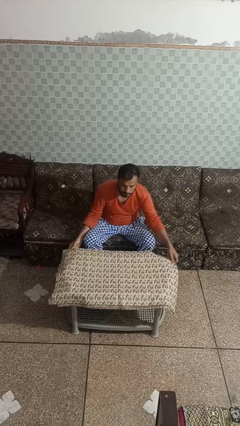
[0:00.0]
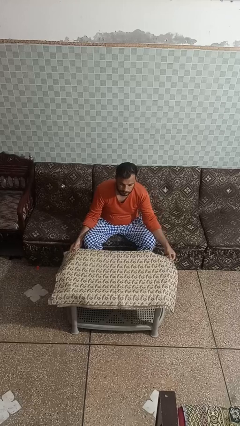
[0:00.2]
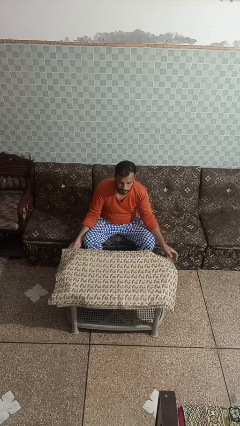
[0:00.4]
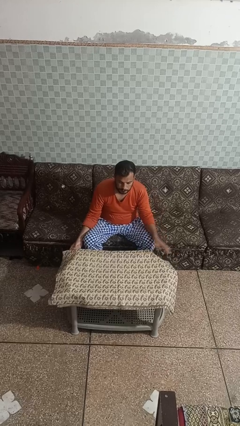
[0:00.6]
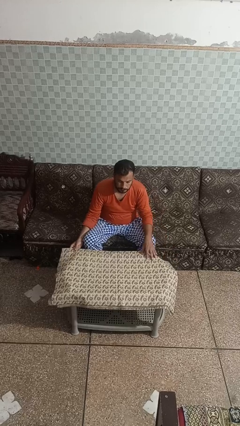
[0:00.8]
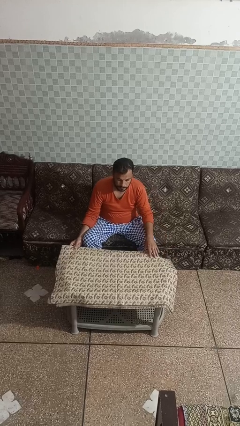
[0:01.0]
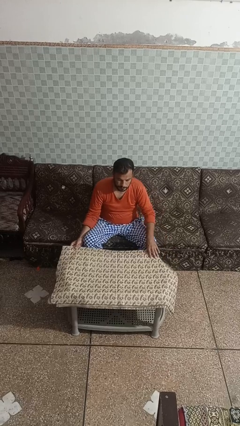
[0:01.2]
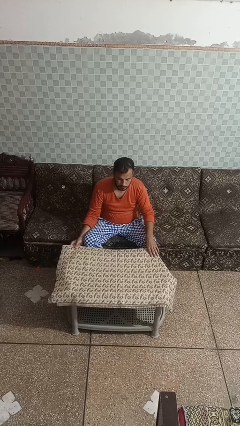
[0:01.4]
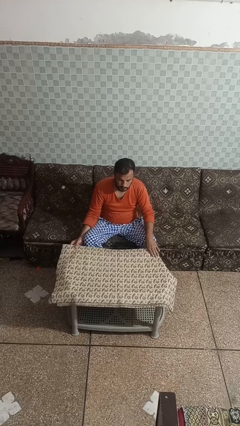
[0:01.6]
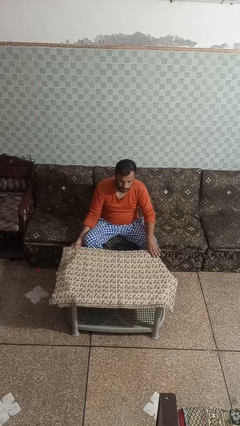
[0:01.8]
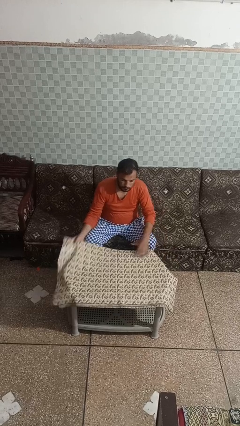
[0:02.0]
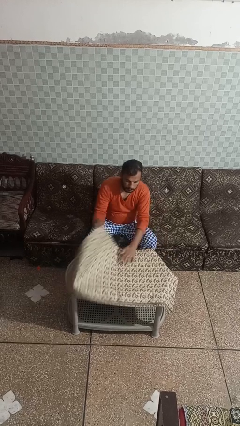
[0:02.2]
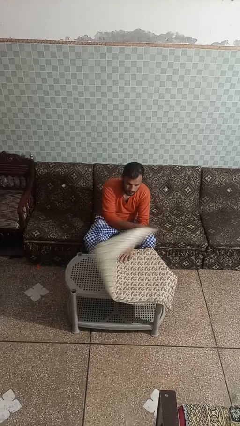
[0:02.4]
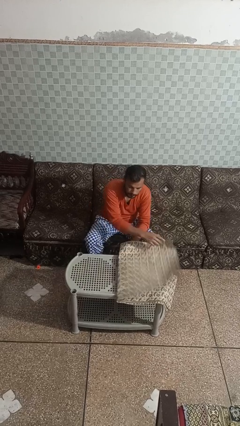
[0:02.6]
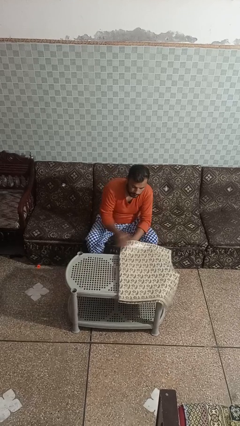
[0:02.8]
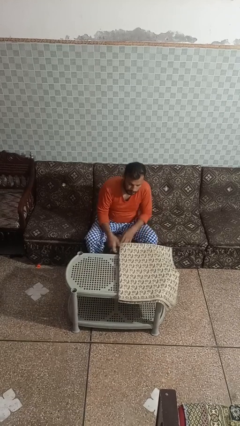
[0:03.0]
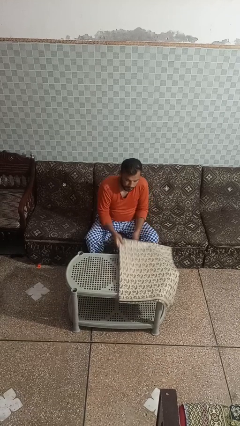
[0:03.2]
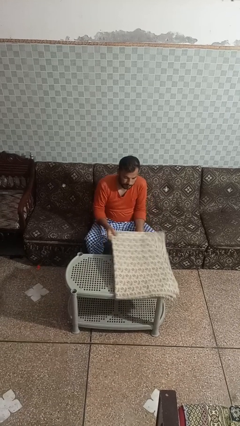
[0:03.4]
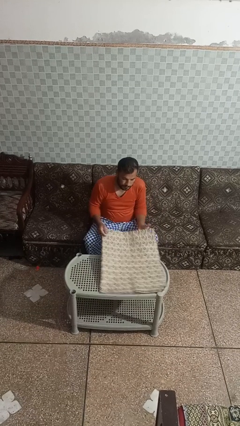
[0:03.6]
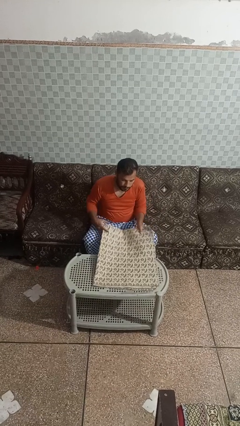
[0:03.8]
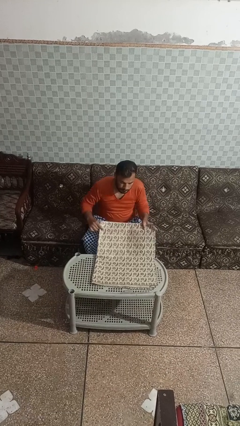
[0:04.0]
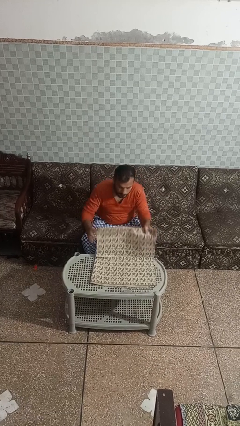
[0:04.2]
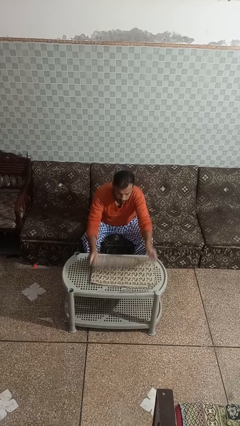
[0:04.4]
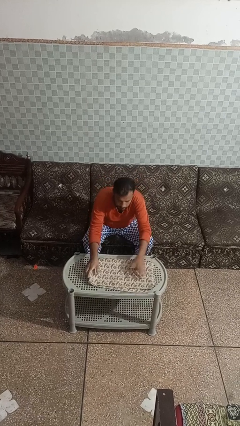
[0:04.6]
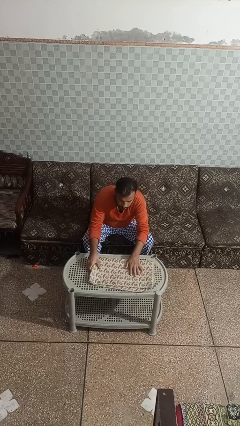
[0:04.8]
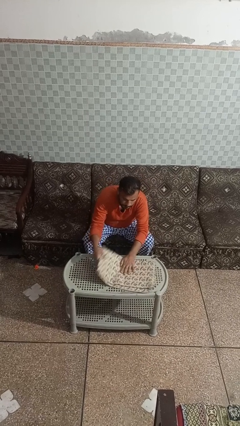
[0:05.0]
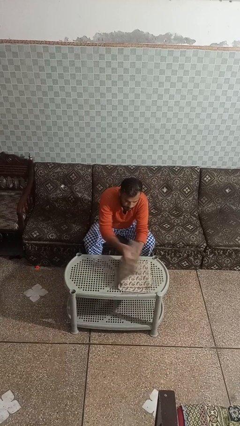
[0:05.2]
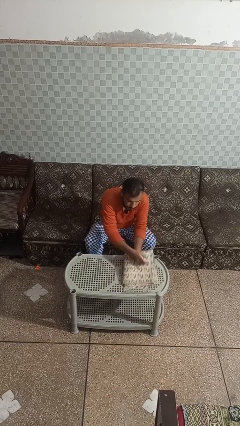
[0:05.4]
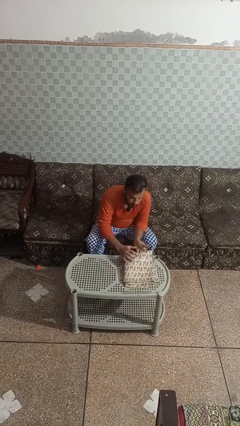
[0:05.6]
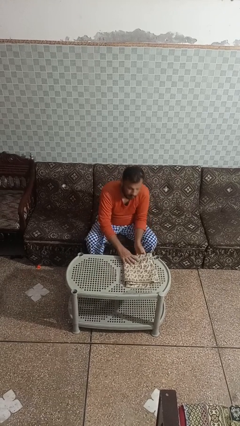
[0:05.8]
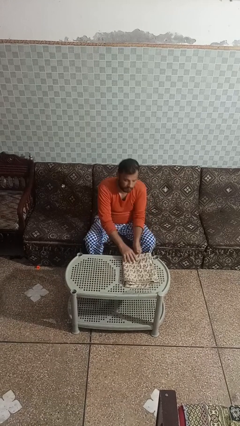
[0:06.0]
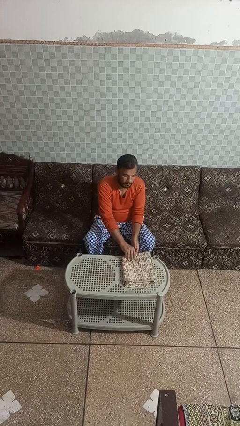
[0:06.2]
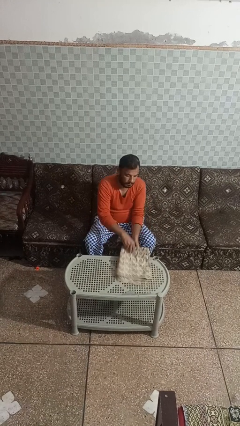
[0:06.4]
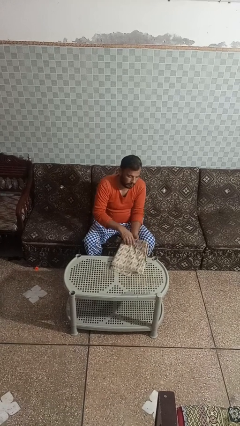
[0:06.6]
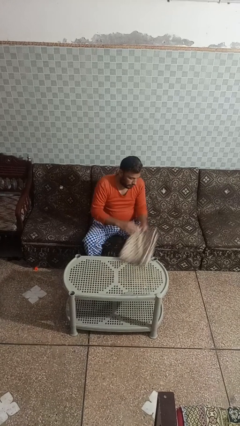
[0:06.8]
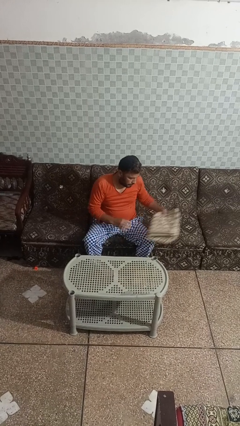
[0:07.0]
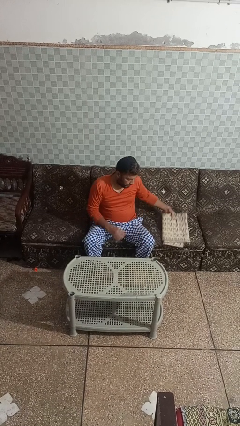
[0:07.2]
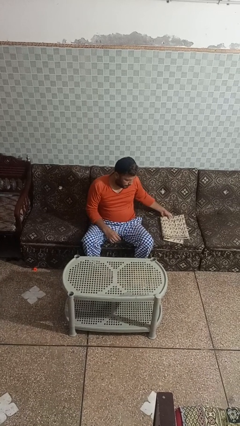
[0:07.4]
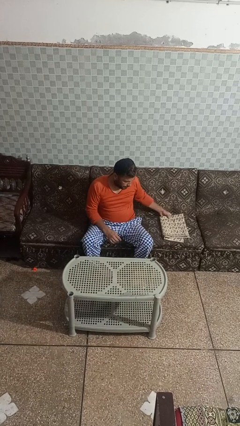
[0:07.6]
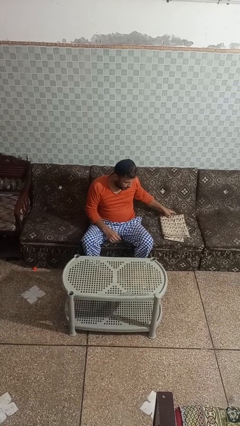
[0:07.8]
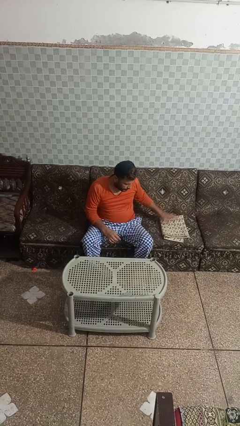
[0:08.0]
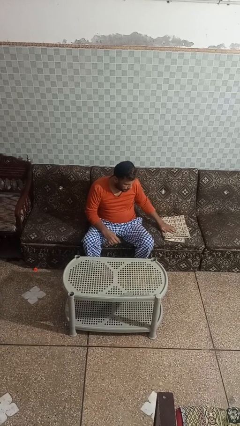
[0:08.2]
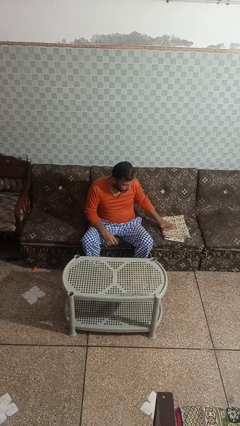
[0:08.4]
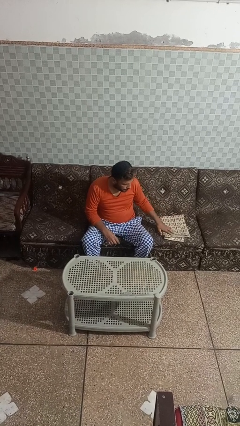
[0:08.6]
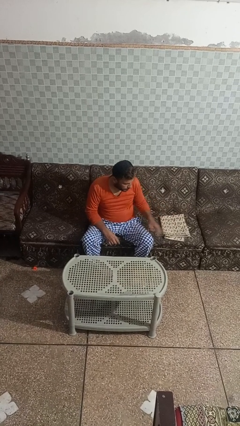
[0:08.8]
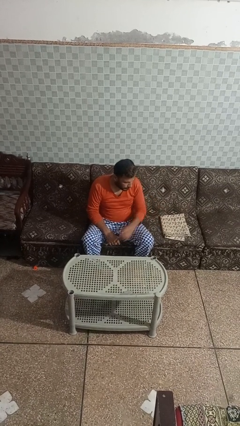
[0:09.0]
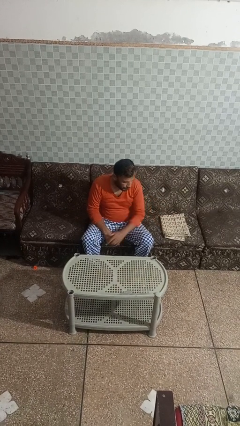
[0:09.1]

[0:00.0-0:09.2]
person folds tablecloth

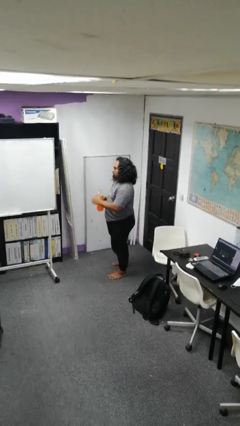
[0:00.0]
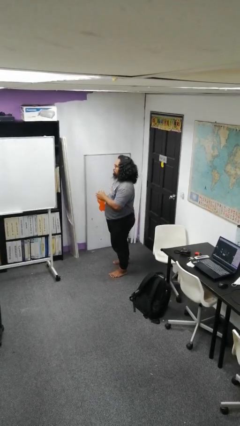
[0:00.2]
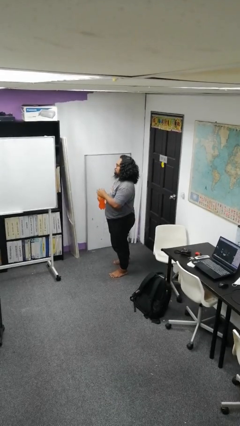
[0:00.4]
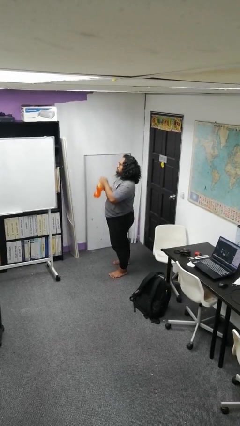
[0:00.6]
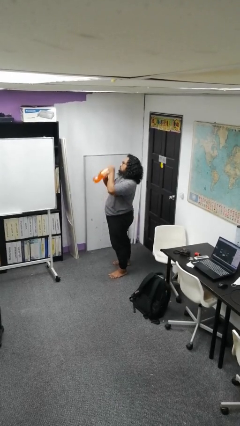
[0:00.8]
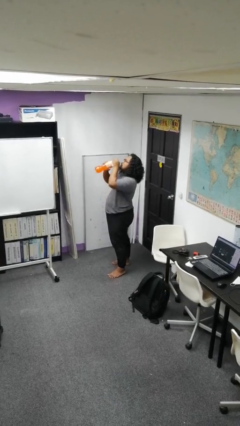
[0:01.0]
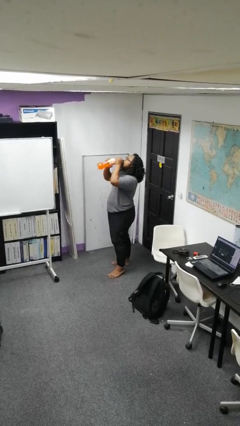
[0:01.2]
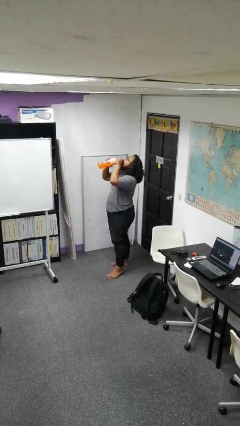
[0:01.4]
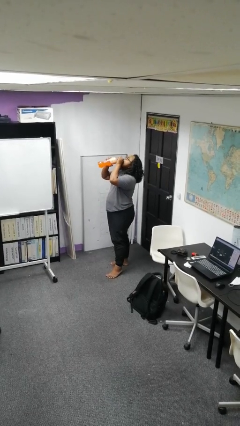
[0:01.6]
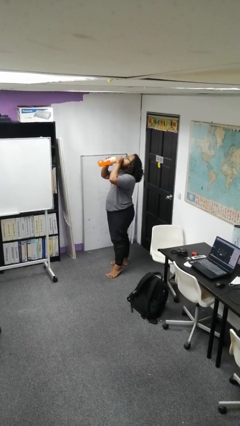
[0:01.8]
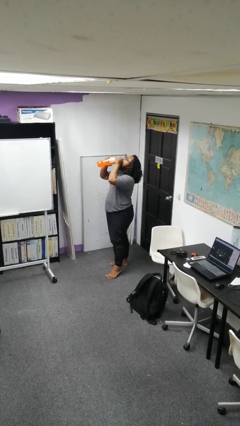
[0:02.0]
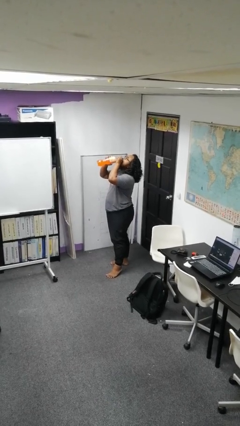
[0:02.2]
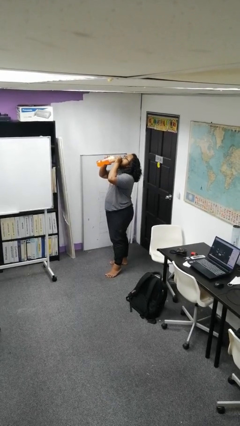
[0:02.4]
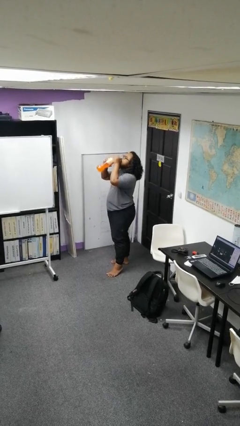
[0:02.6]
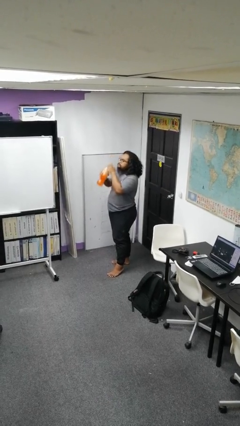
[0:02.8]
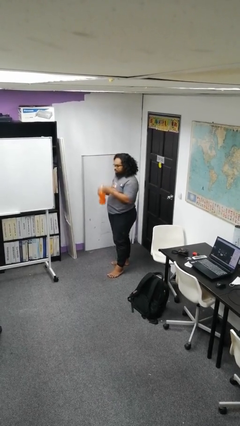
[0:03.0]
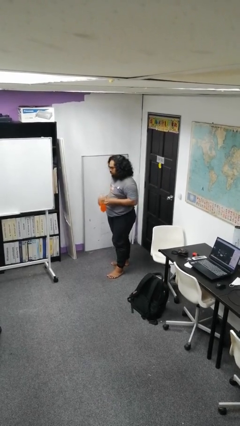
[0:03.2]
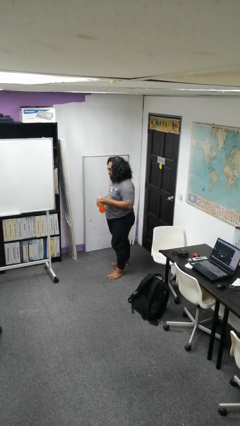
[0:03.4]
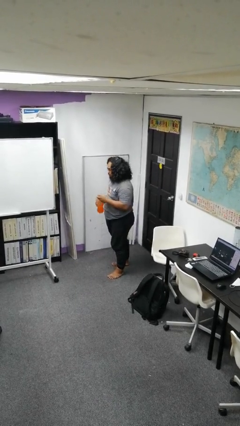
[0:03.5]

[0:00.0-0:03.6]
person drinks from bottle

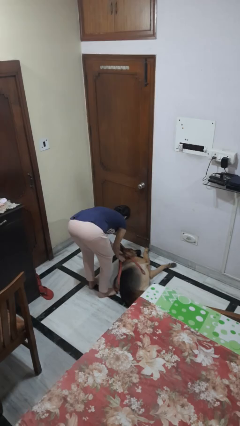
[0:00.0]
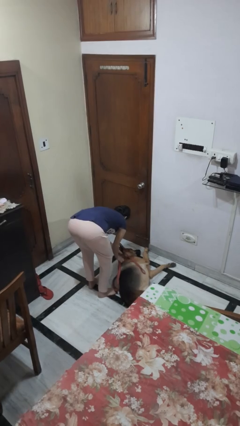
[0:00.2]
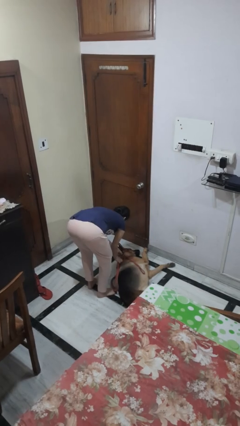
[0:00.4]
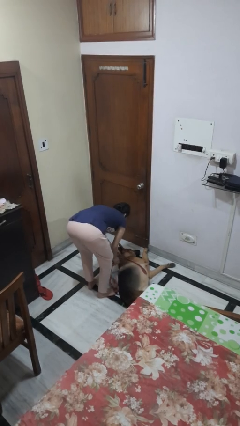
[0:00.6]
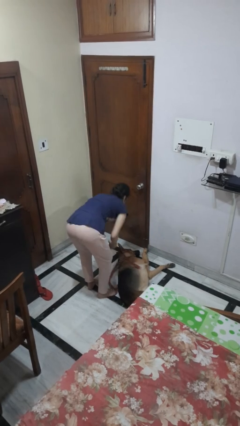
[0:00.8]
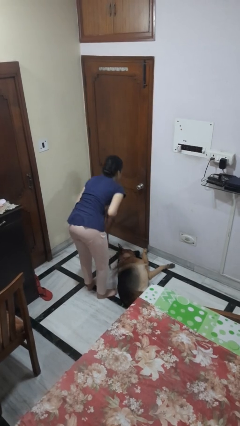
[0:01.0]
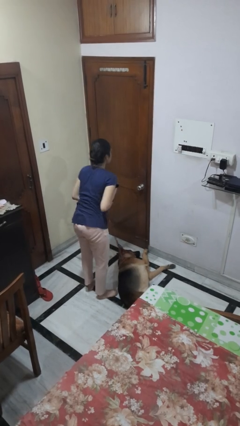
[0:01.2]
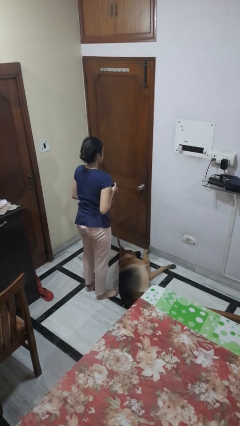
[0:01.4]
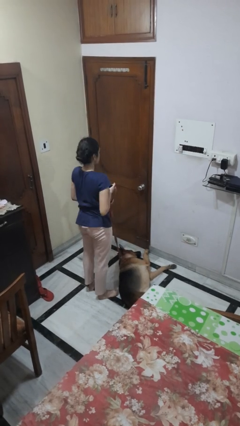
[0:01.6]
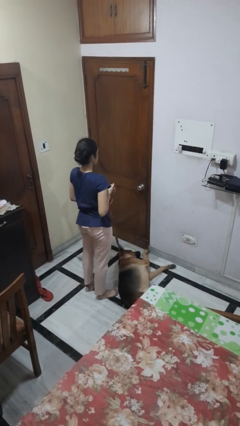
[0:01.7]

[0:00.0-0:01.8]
person attaches leash to dog

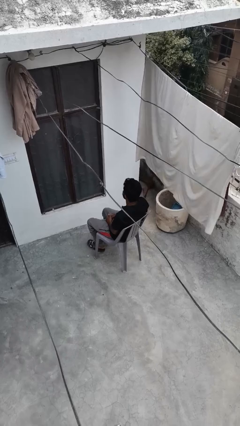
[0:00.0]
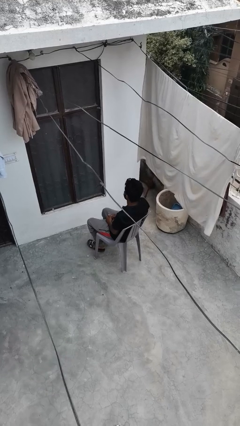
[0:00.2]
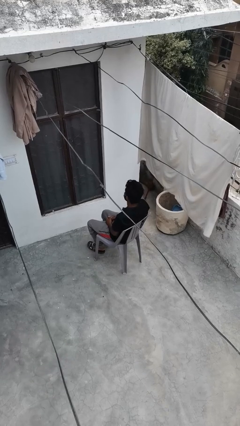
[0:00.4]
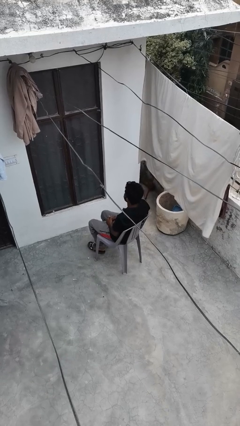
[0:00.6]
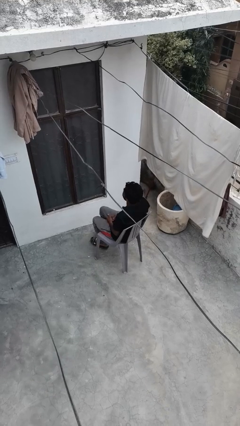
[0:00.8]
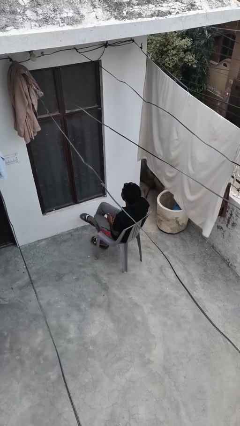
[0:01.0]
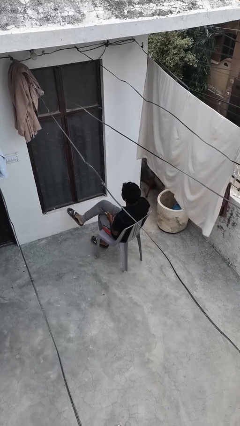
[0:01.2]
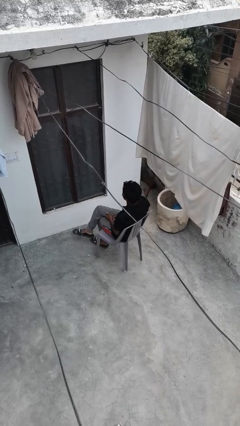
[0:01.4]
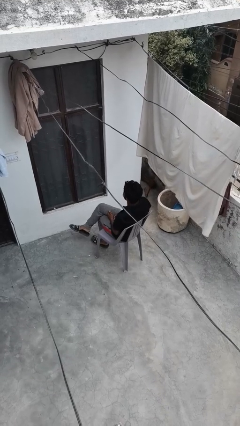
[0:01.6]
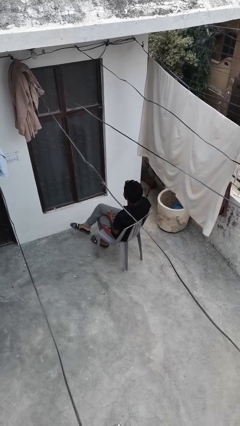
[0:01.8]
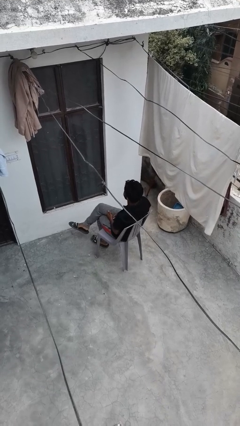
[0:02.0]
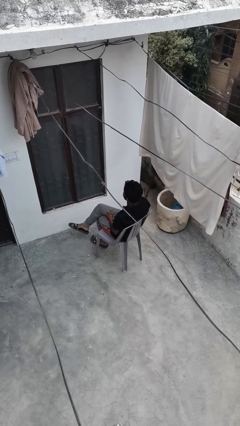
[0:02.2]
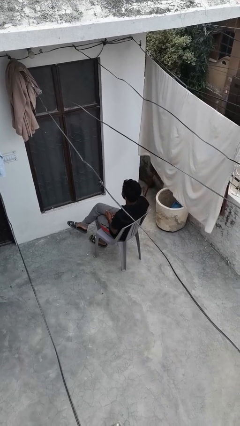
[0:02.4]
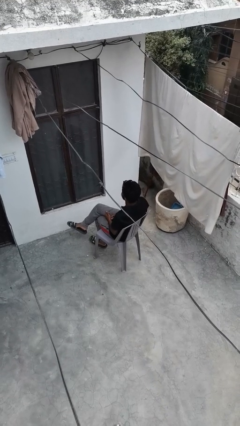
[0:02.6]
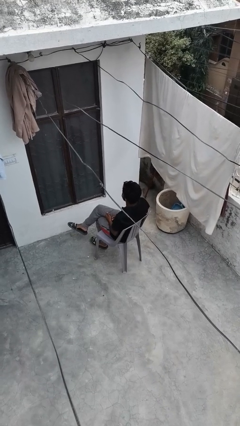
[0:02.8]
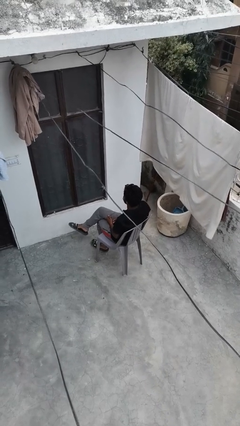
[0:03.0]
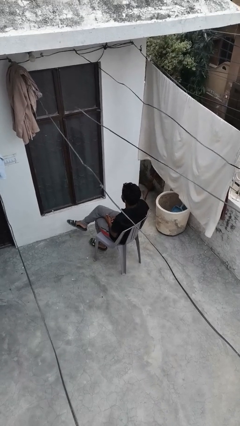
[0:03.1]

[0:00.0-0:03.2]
person crosses legs

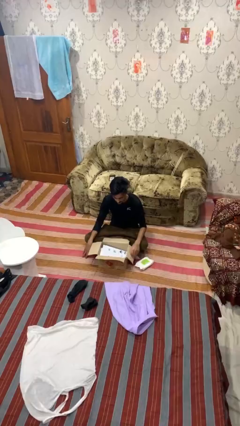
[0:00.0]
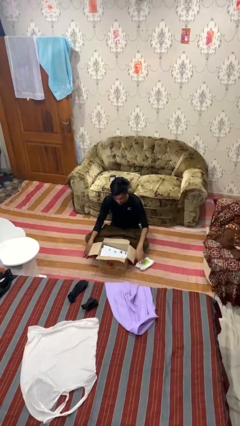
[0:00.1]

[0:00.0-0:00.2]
person puts object into box
